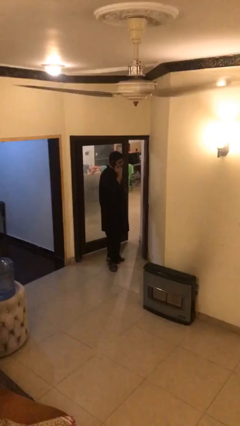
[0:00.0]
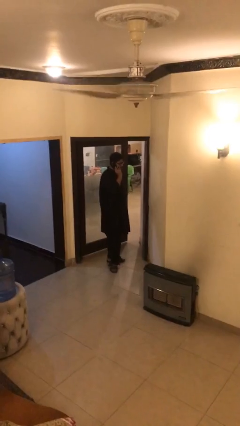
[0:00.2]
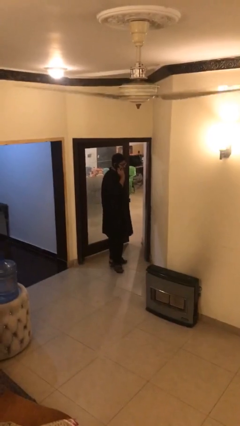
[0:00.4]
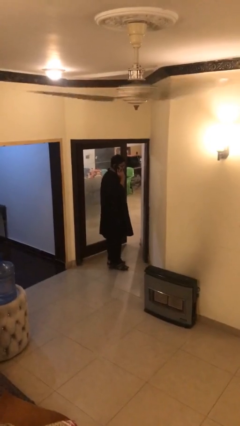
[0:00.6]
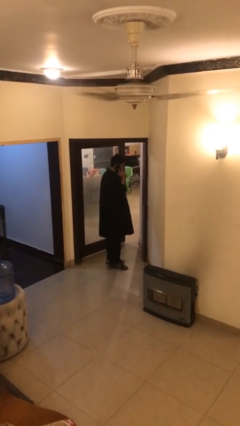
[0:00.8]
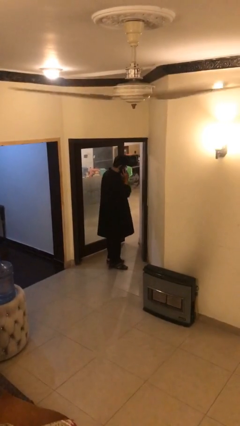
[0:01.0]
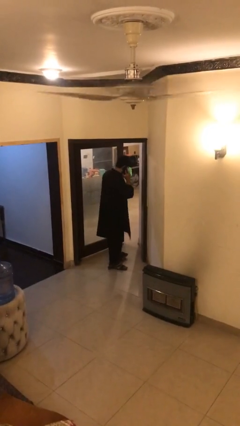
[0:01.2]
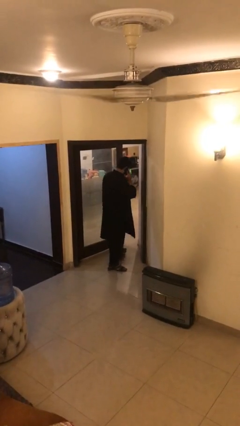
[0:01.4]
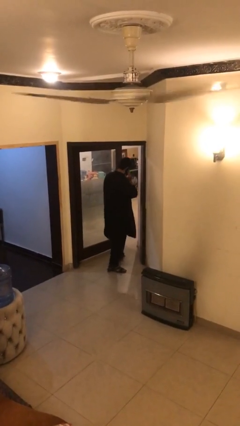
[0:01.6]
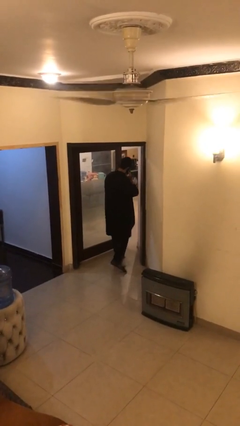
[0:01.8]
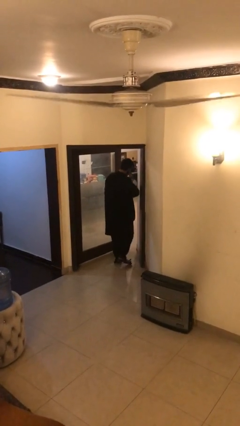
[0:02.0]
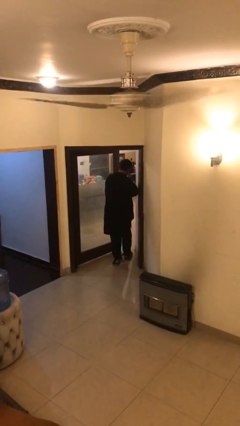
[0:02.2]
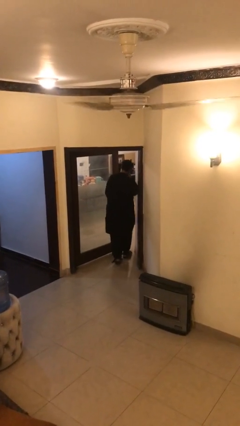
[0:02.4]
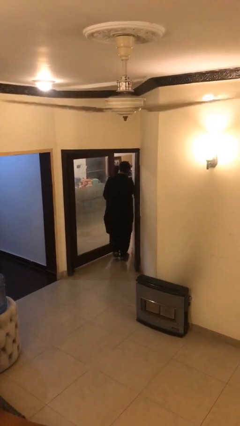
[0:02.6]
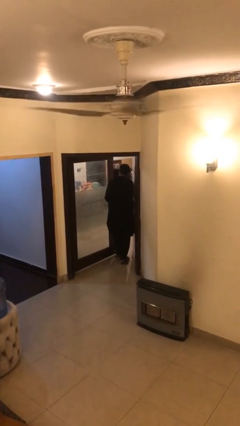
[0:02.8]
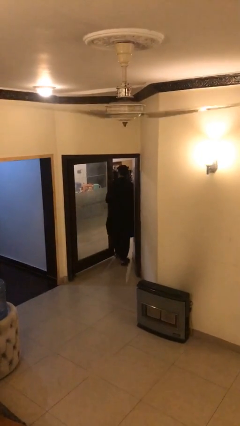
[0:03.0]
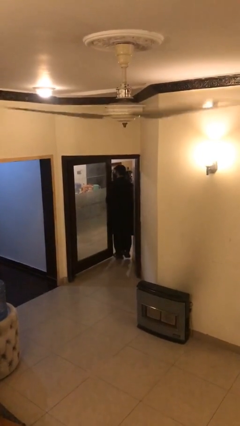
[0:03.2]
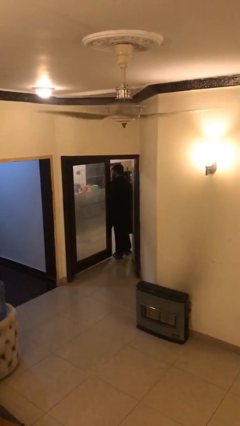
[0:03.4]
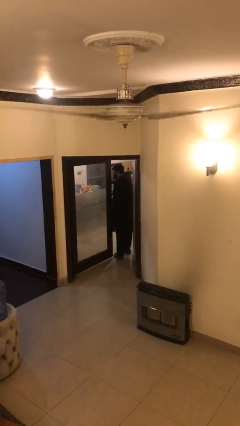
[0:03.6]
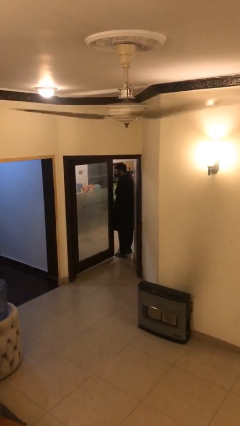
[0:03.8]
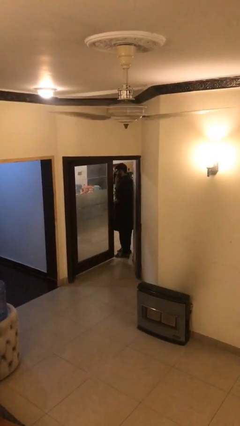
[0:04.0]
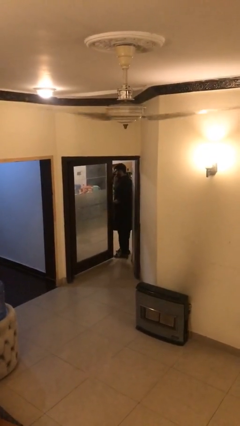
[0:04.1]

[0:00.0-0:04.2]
person exits scene through structure

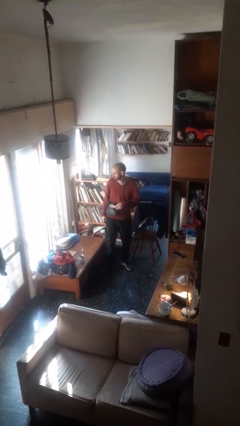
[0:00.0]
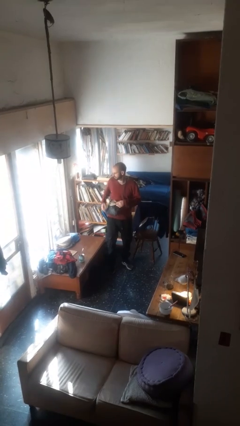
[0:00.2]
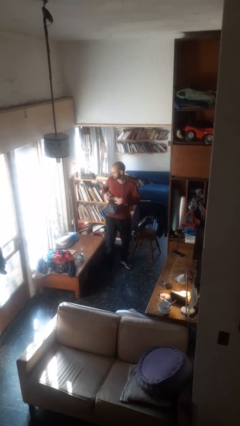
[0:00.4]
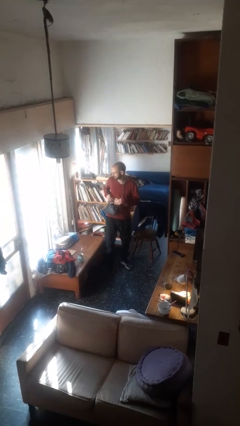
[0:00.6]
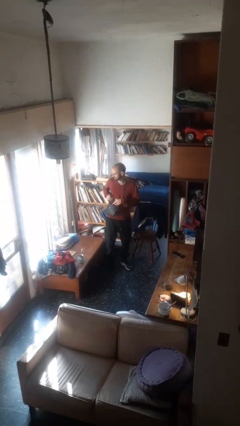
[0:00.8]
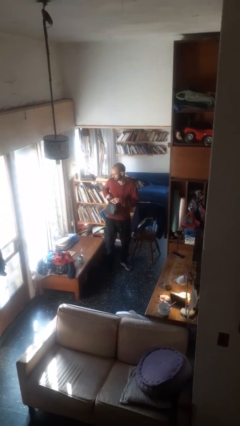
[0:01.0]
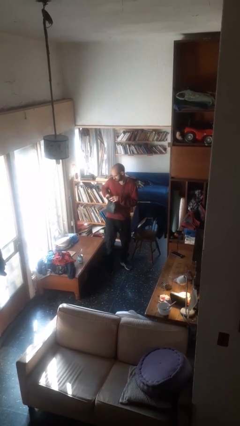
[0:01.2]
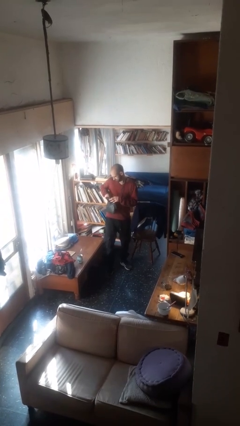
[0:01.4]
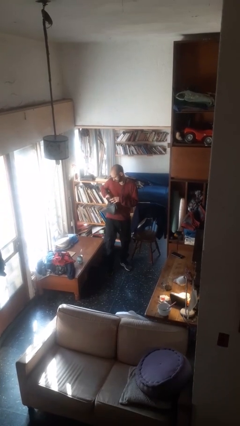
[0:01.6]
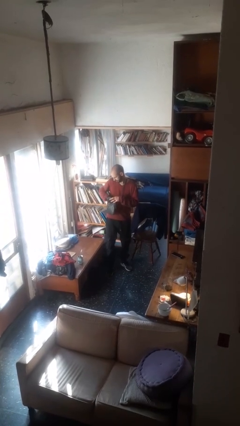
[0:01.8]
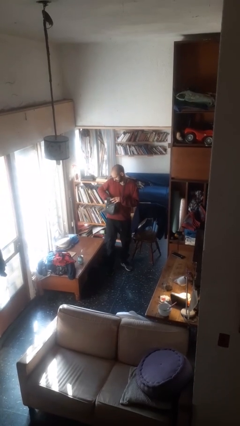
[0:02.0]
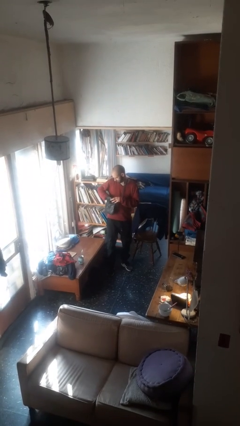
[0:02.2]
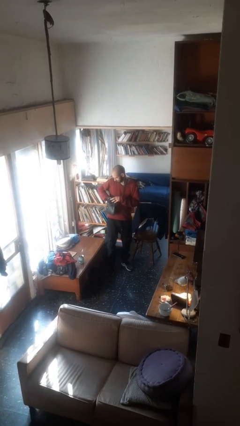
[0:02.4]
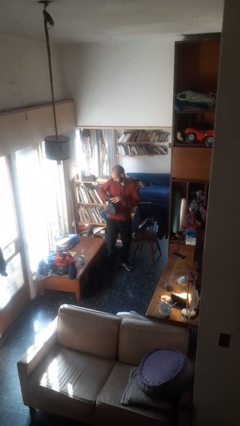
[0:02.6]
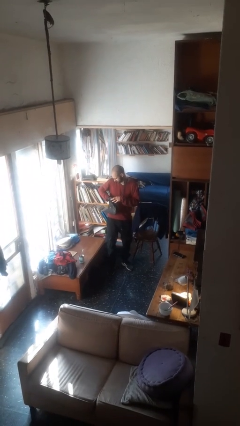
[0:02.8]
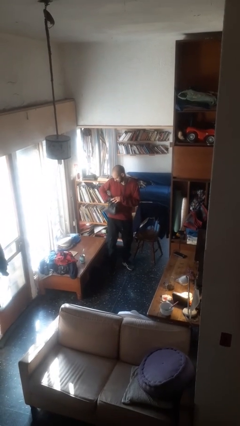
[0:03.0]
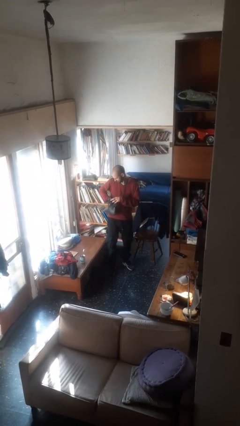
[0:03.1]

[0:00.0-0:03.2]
person searches in purse

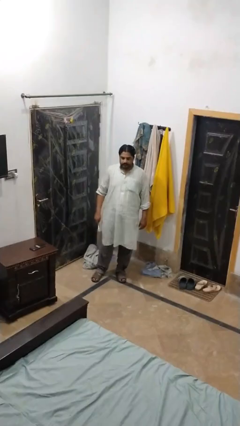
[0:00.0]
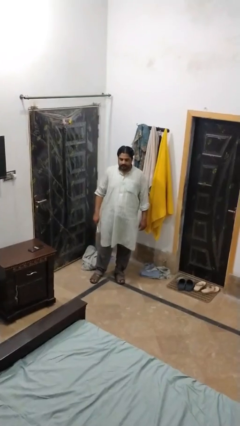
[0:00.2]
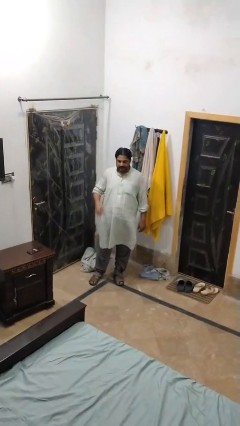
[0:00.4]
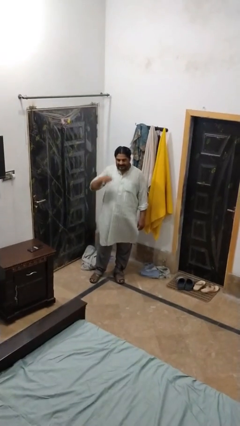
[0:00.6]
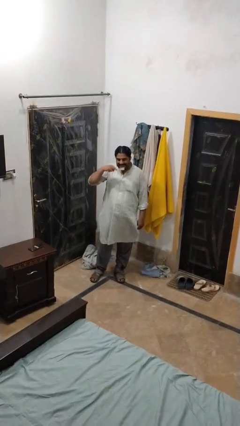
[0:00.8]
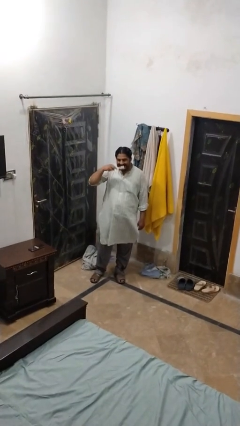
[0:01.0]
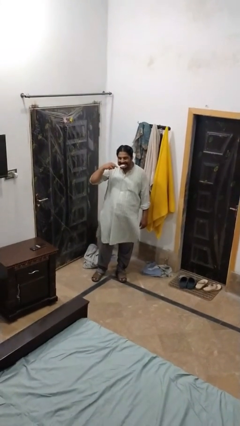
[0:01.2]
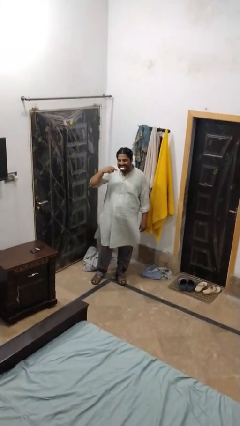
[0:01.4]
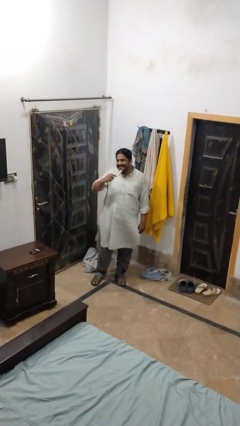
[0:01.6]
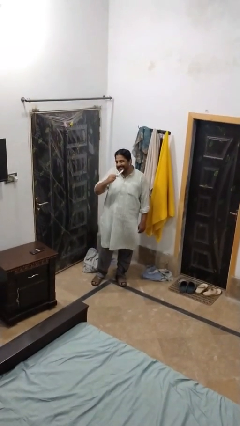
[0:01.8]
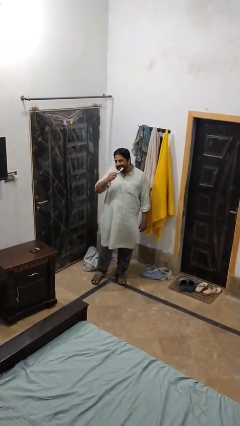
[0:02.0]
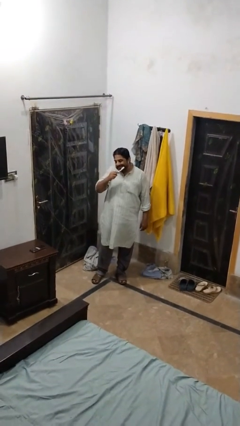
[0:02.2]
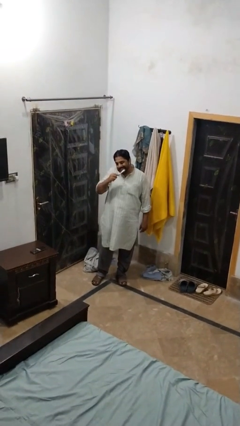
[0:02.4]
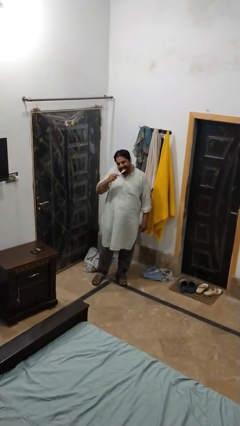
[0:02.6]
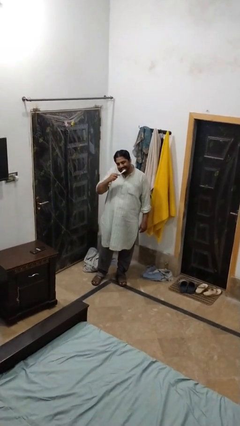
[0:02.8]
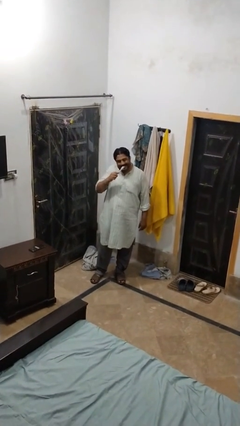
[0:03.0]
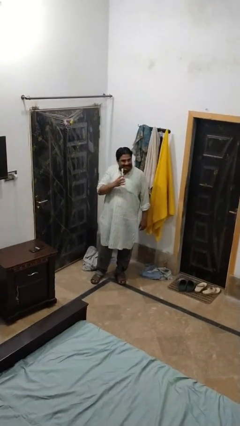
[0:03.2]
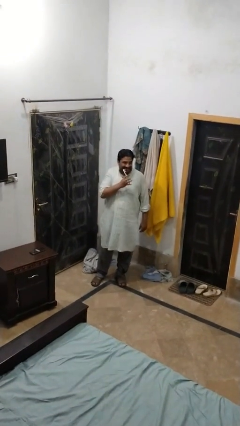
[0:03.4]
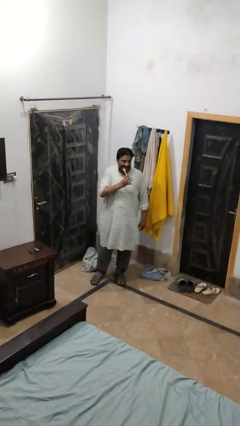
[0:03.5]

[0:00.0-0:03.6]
person brushes teeth

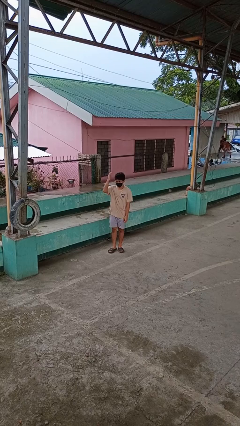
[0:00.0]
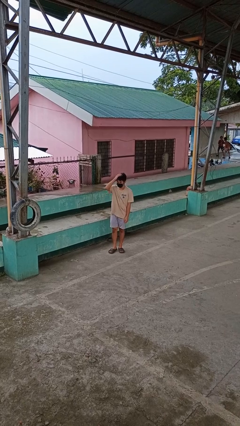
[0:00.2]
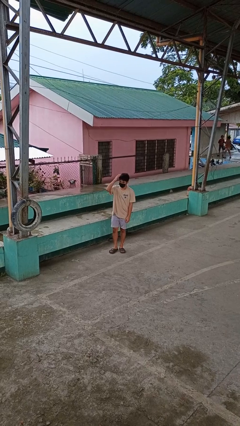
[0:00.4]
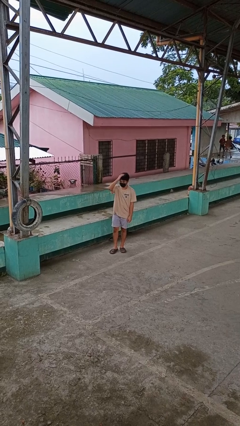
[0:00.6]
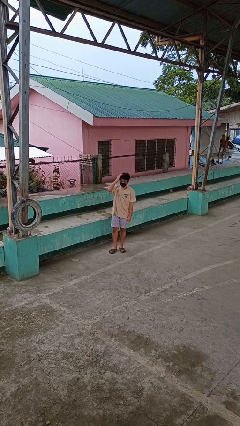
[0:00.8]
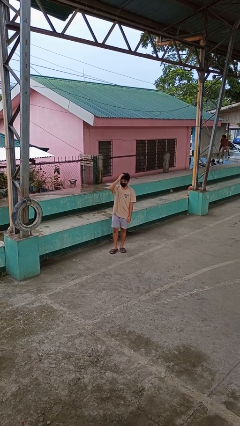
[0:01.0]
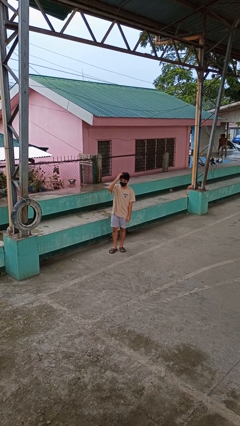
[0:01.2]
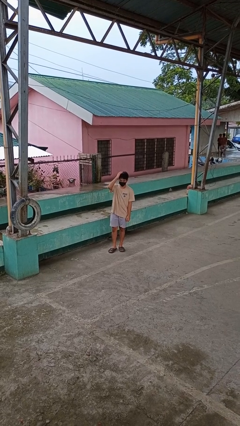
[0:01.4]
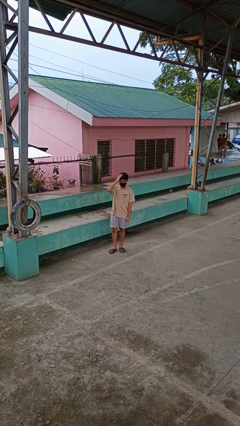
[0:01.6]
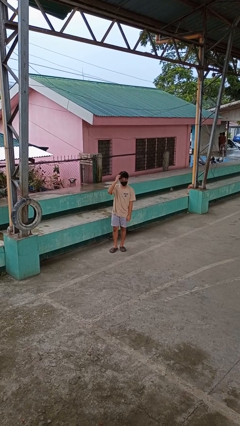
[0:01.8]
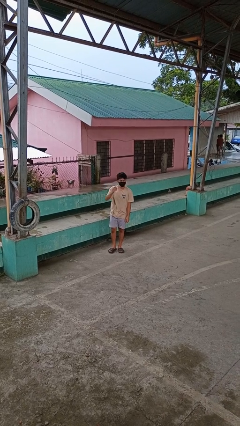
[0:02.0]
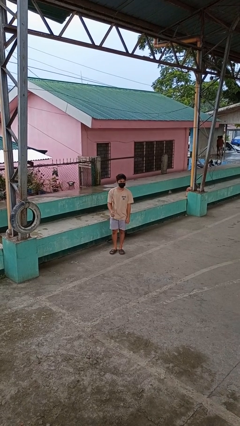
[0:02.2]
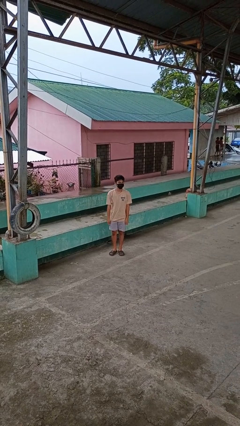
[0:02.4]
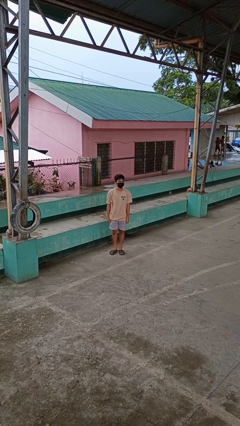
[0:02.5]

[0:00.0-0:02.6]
person pats head

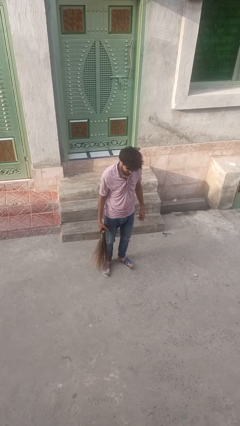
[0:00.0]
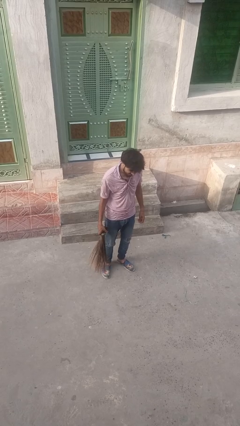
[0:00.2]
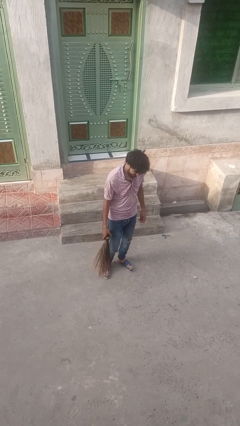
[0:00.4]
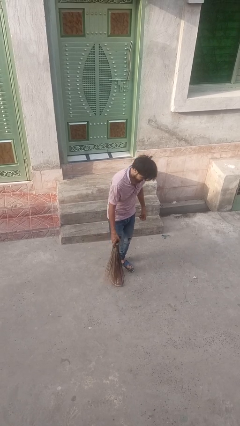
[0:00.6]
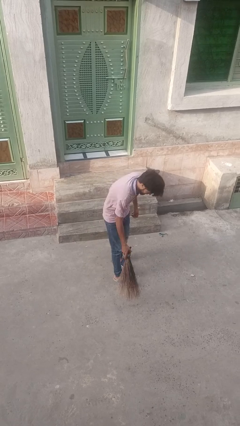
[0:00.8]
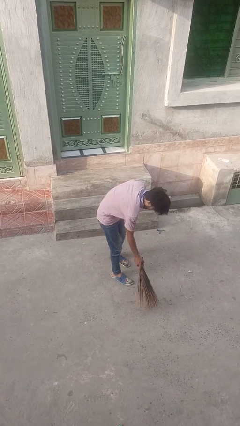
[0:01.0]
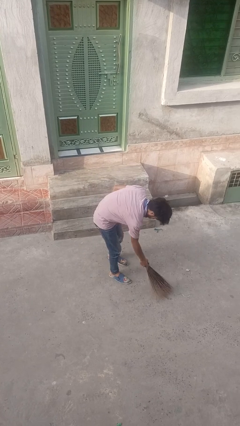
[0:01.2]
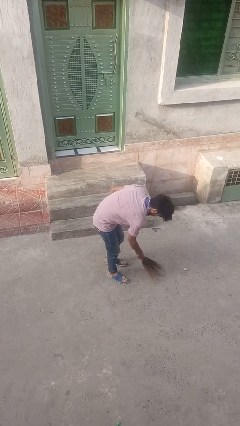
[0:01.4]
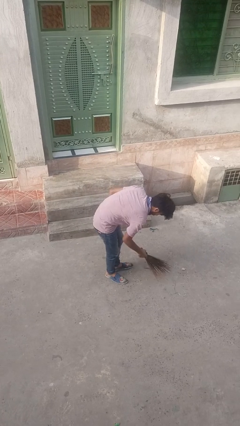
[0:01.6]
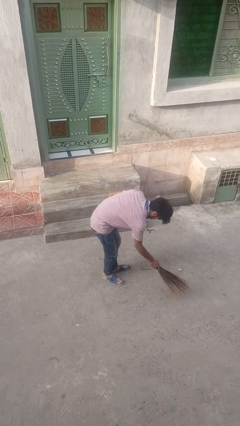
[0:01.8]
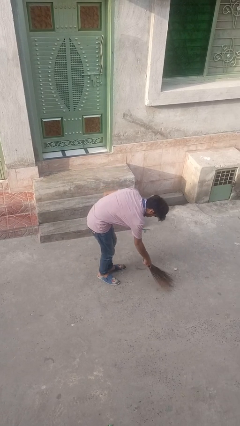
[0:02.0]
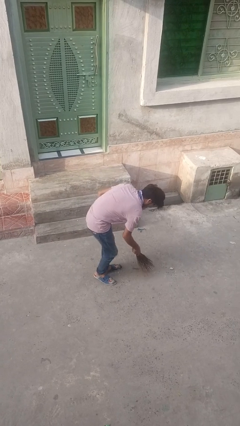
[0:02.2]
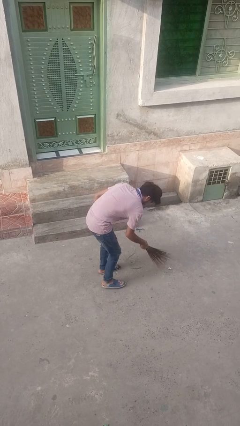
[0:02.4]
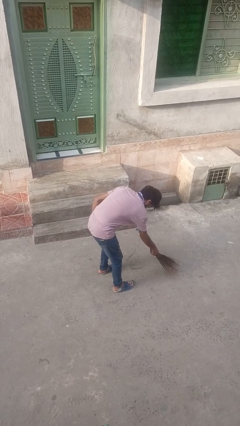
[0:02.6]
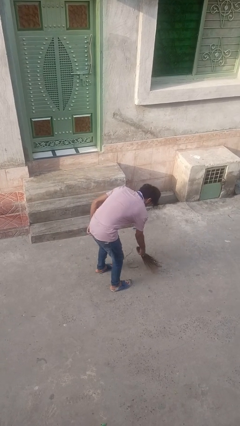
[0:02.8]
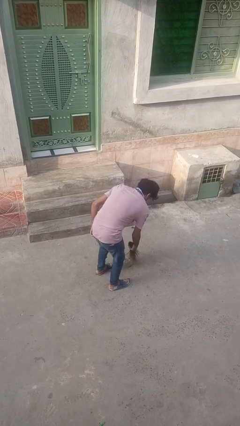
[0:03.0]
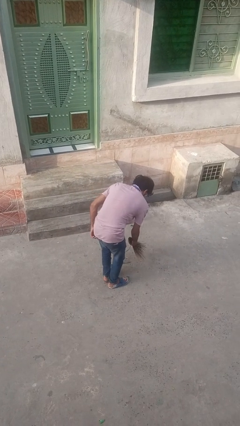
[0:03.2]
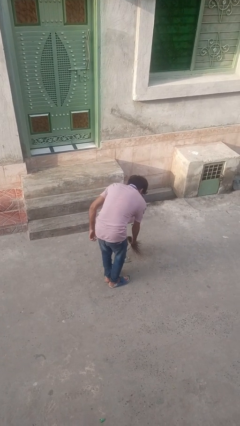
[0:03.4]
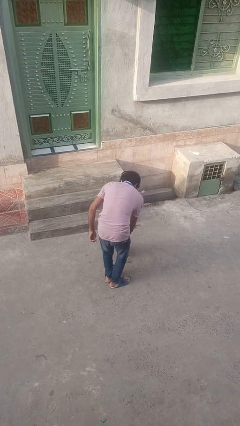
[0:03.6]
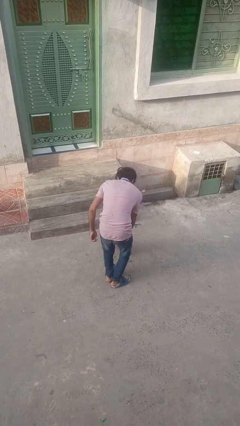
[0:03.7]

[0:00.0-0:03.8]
person sweeps floor

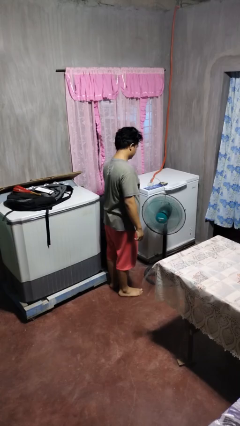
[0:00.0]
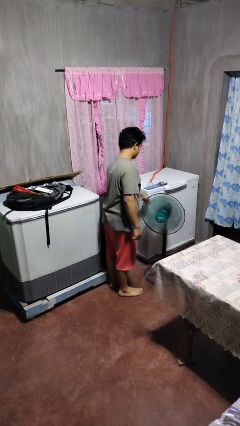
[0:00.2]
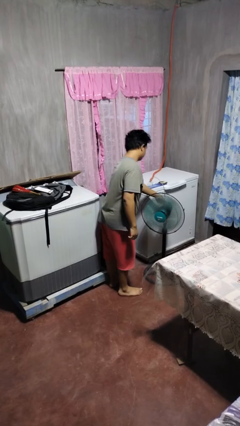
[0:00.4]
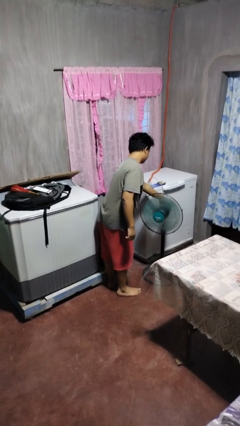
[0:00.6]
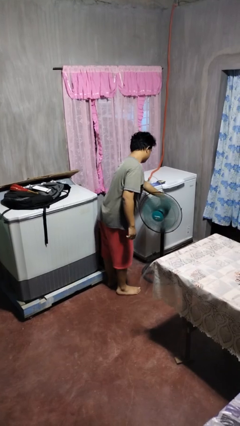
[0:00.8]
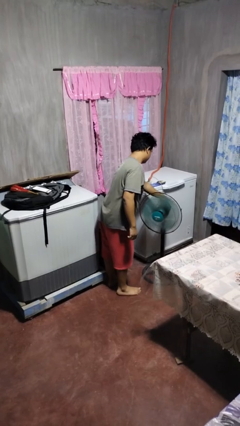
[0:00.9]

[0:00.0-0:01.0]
person turns on fan
